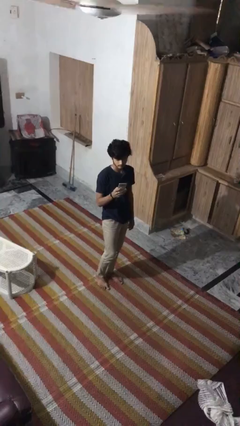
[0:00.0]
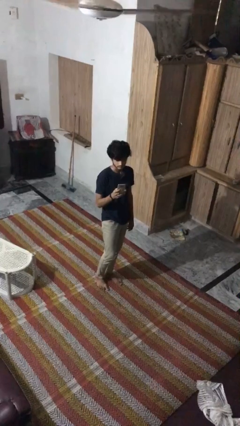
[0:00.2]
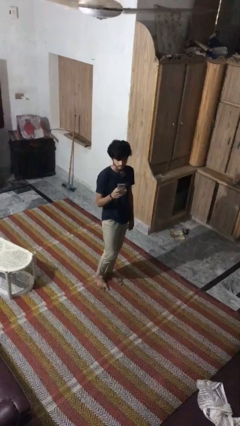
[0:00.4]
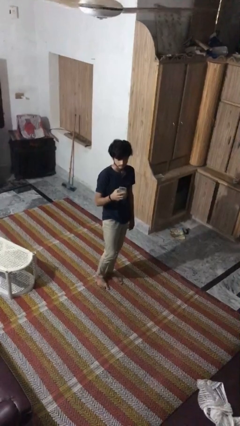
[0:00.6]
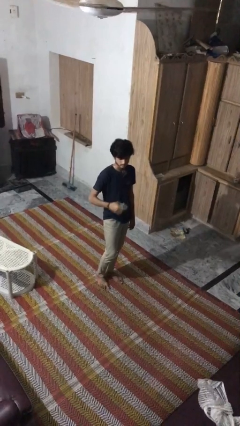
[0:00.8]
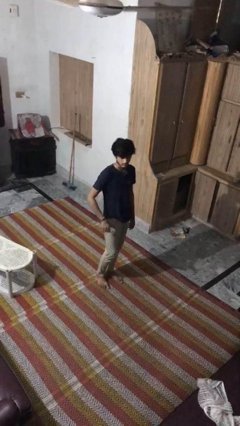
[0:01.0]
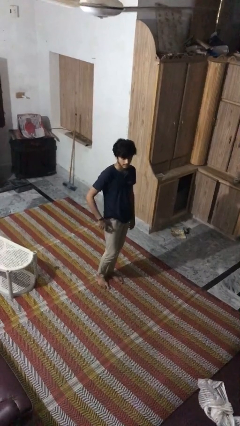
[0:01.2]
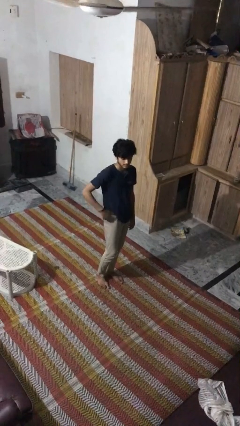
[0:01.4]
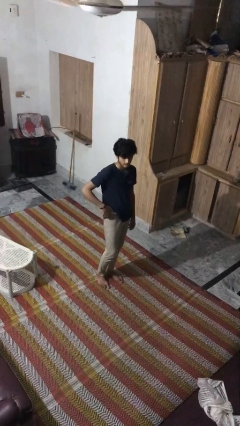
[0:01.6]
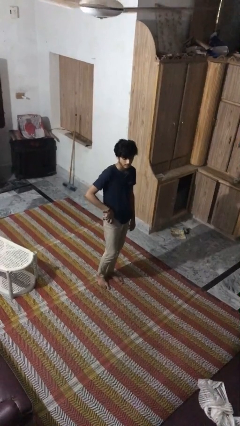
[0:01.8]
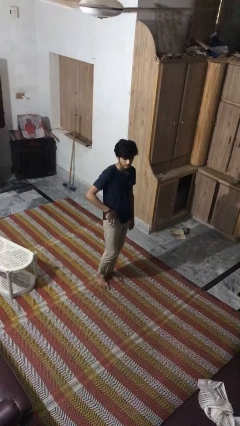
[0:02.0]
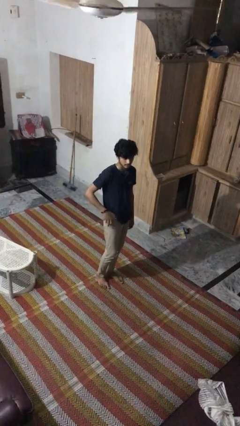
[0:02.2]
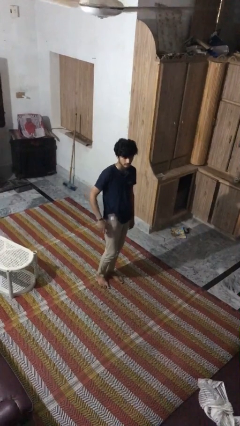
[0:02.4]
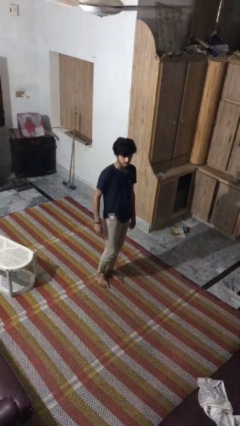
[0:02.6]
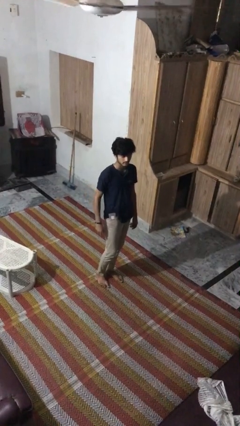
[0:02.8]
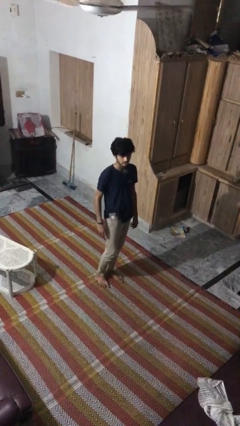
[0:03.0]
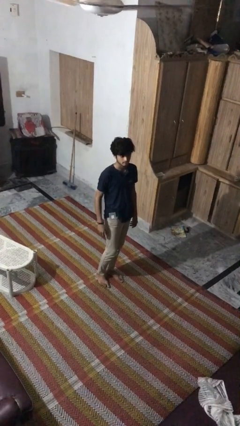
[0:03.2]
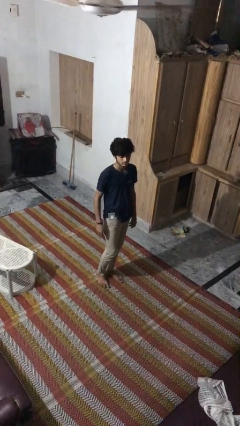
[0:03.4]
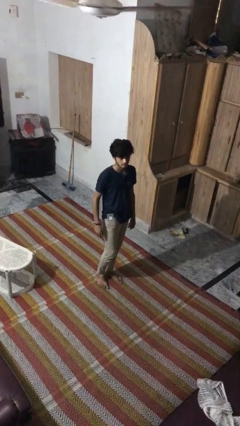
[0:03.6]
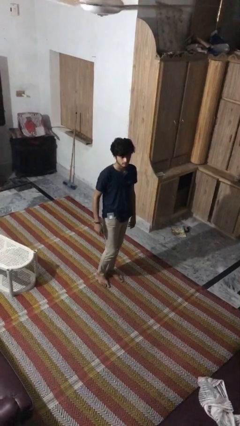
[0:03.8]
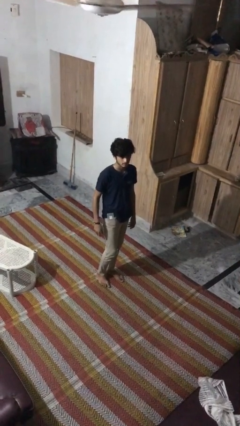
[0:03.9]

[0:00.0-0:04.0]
person puts phone into pocket

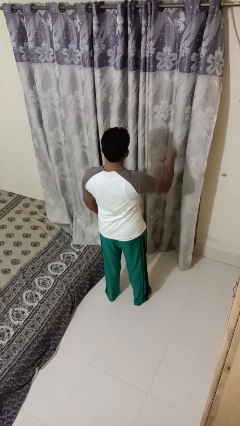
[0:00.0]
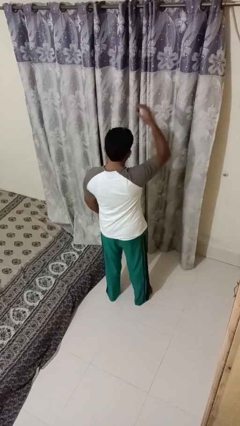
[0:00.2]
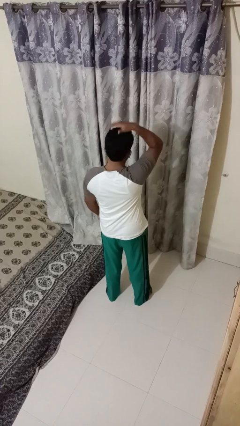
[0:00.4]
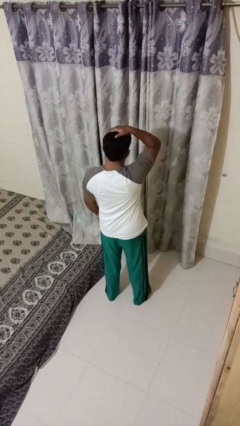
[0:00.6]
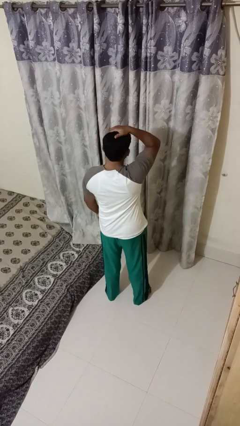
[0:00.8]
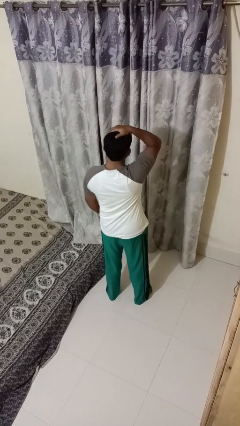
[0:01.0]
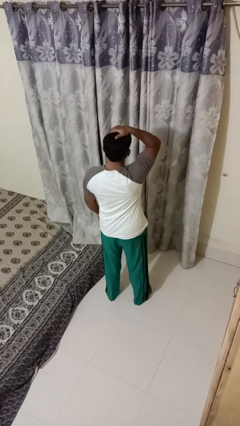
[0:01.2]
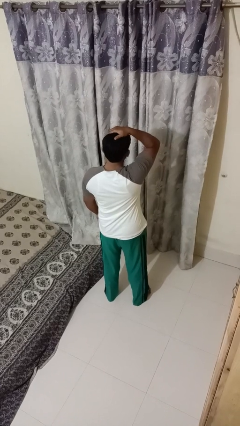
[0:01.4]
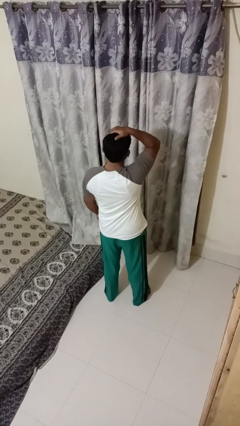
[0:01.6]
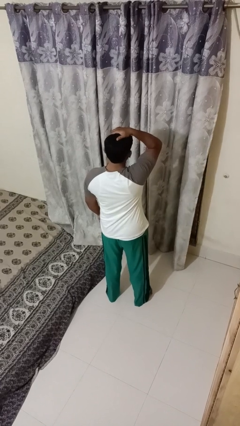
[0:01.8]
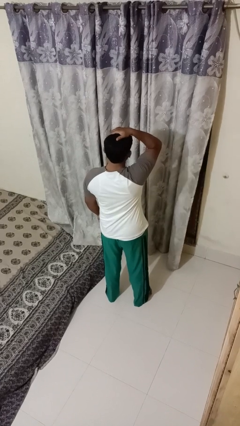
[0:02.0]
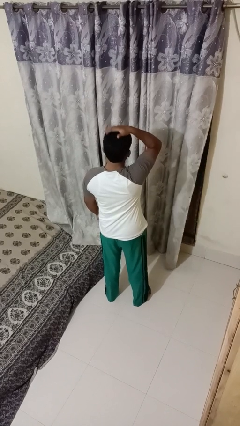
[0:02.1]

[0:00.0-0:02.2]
person pats head

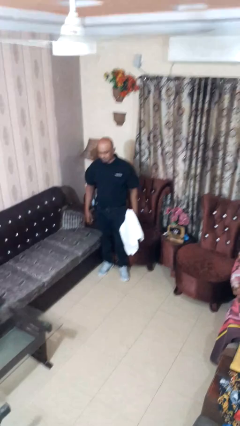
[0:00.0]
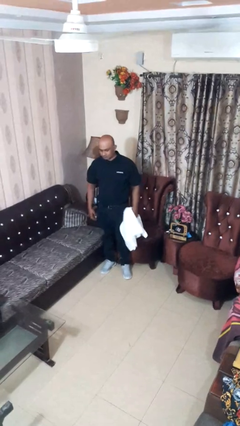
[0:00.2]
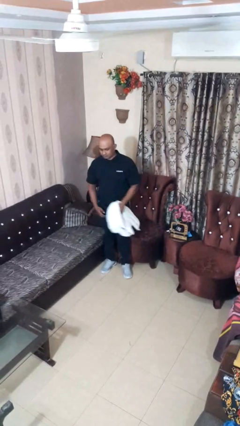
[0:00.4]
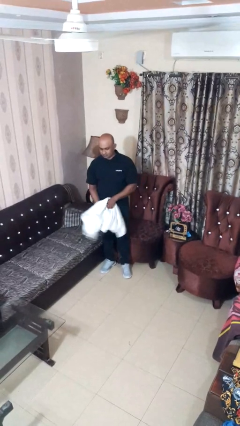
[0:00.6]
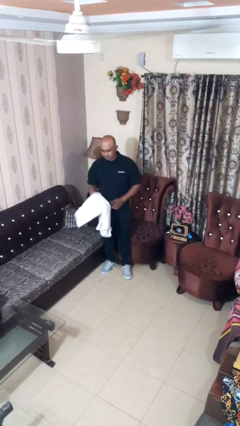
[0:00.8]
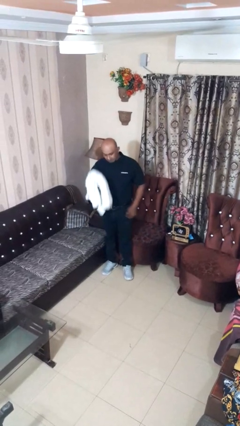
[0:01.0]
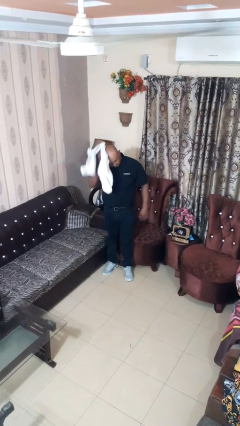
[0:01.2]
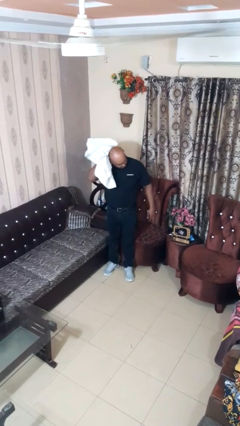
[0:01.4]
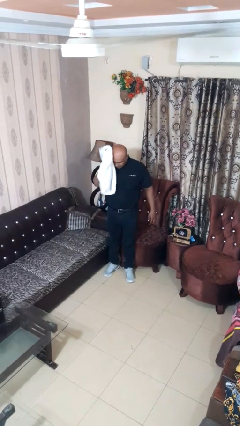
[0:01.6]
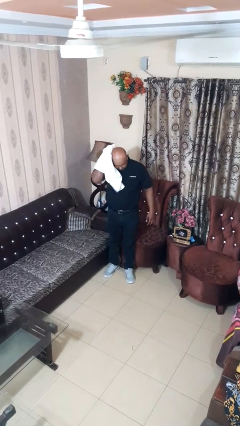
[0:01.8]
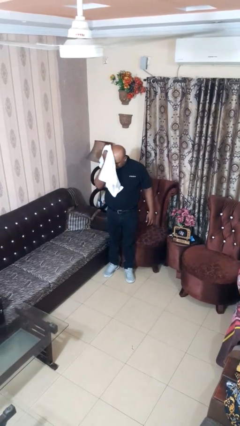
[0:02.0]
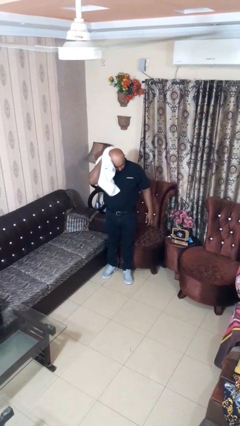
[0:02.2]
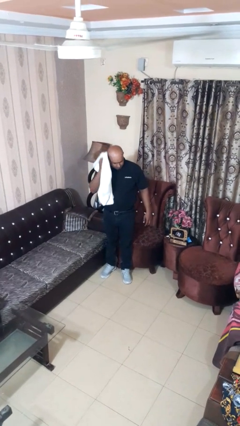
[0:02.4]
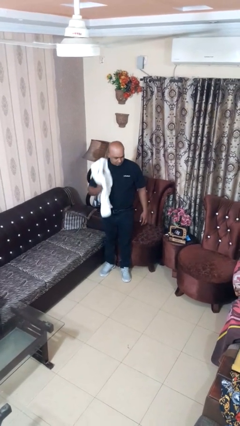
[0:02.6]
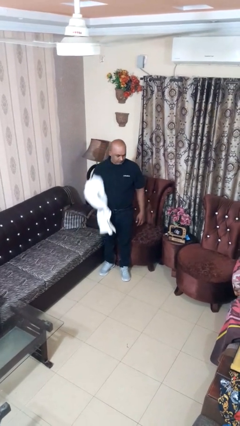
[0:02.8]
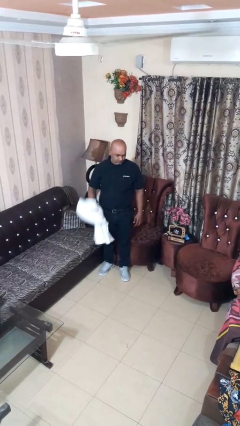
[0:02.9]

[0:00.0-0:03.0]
person dries hair with towel

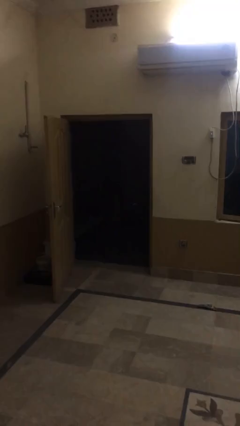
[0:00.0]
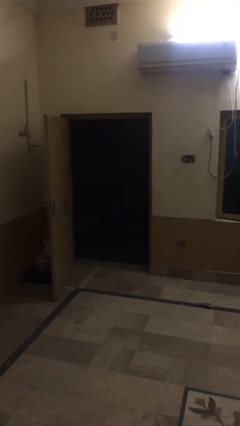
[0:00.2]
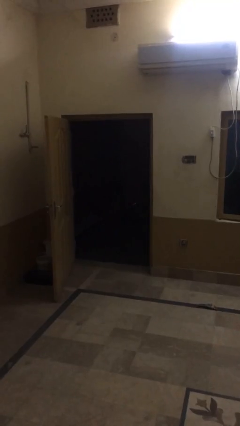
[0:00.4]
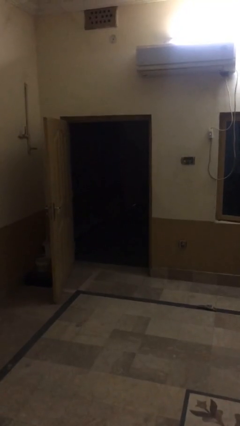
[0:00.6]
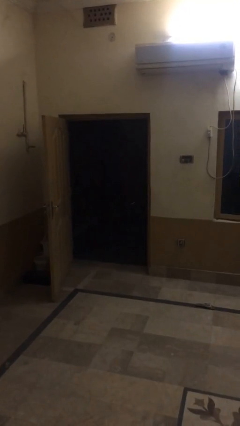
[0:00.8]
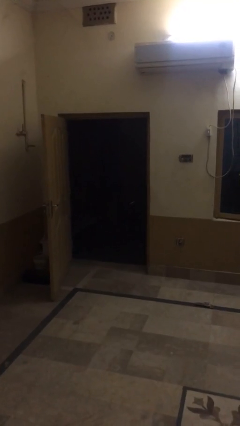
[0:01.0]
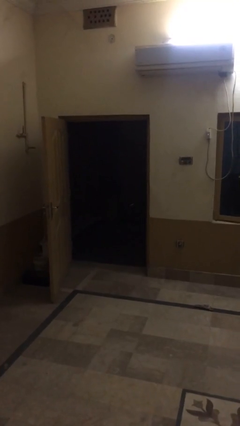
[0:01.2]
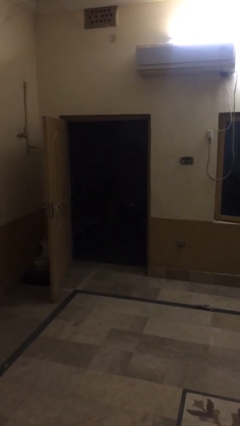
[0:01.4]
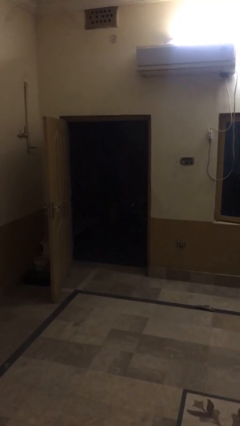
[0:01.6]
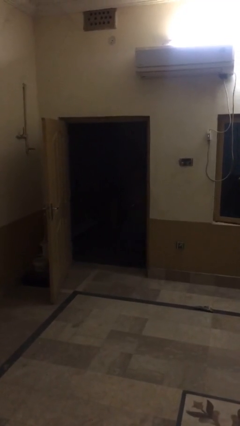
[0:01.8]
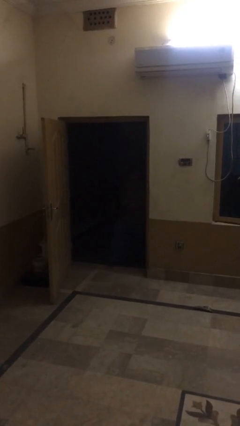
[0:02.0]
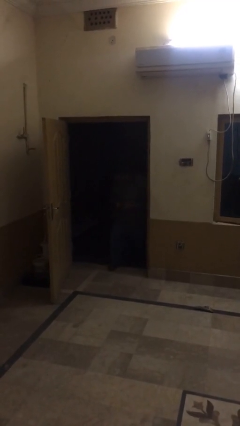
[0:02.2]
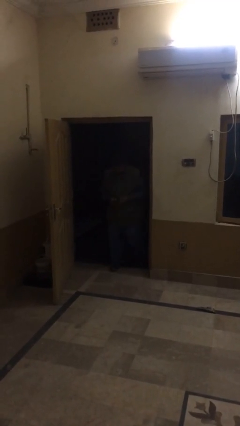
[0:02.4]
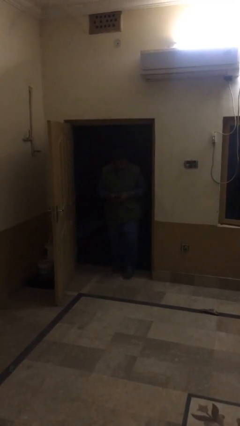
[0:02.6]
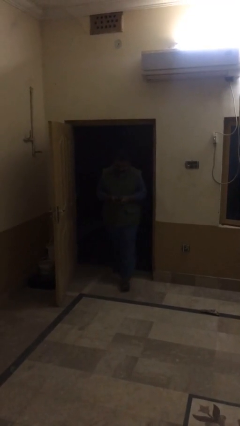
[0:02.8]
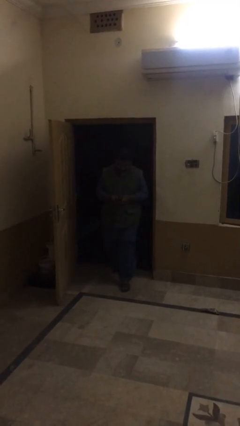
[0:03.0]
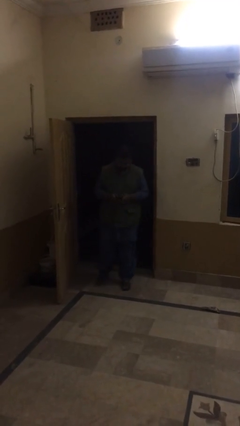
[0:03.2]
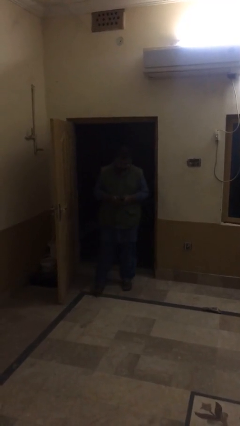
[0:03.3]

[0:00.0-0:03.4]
person enters scene through structure

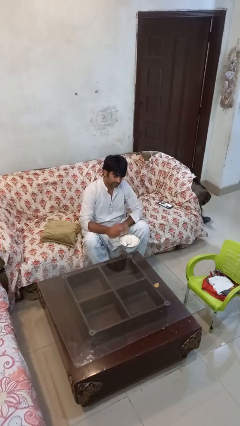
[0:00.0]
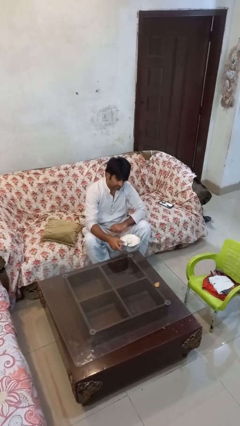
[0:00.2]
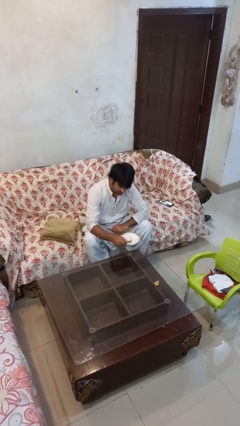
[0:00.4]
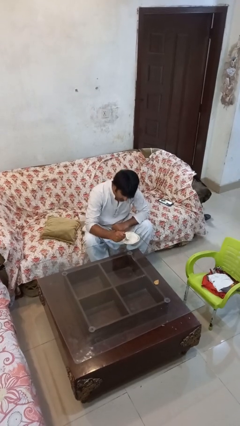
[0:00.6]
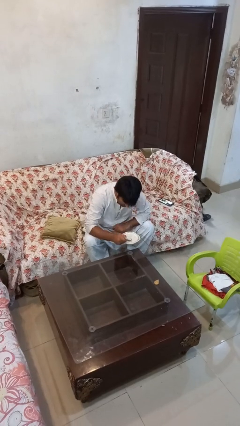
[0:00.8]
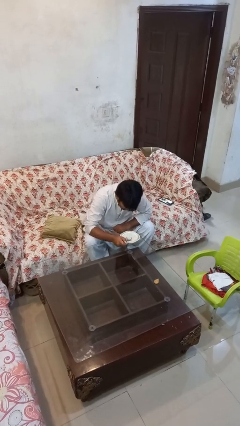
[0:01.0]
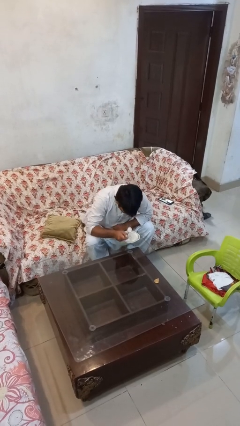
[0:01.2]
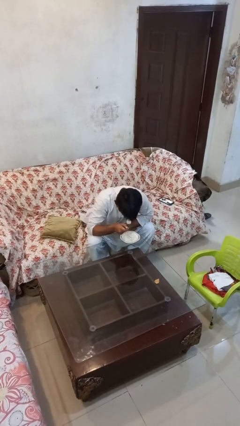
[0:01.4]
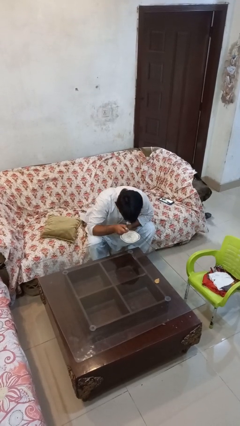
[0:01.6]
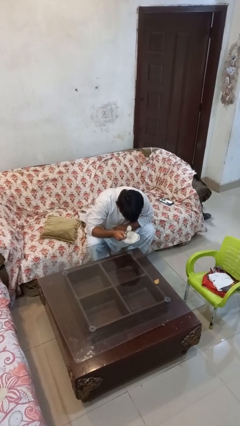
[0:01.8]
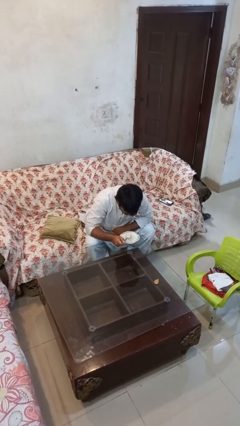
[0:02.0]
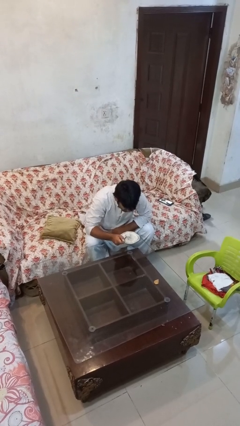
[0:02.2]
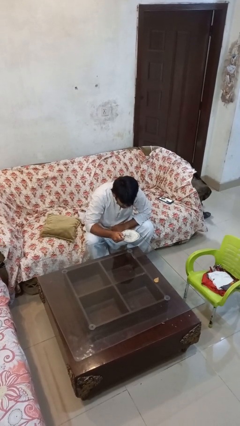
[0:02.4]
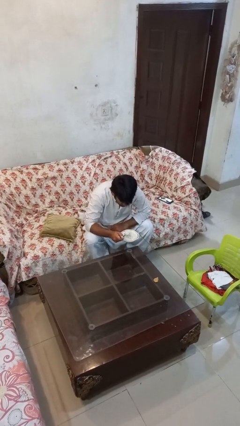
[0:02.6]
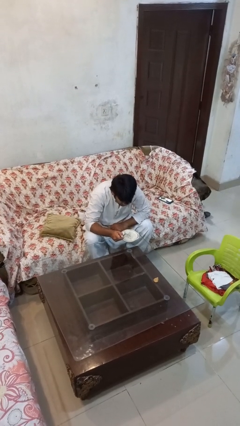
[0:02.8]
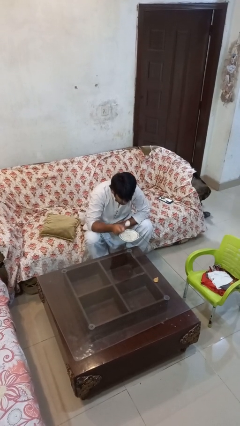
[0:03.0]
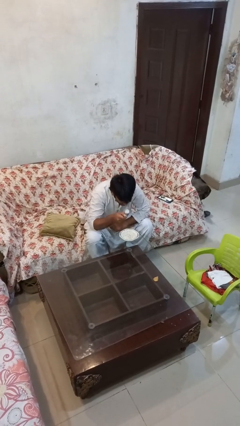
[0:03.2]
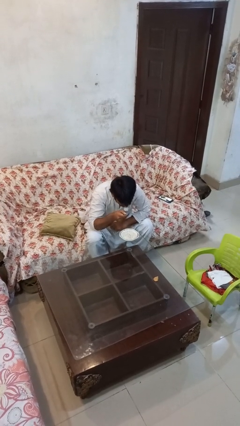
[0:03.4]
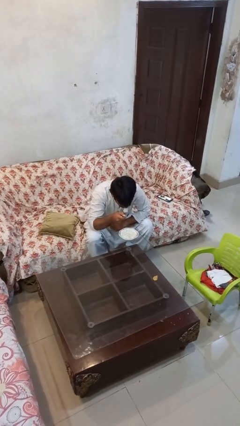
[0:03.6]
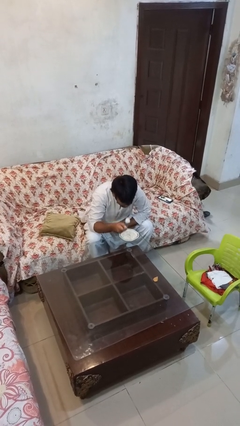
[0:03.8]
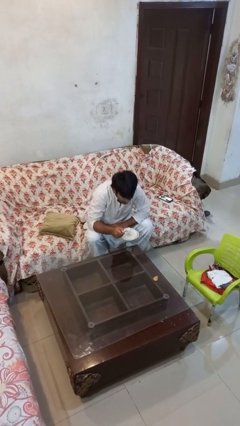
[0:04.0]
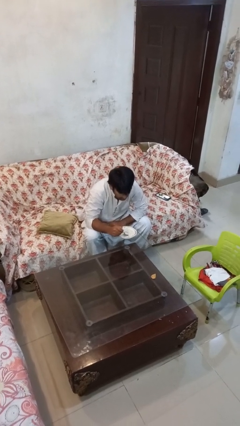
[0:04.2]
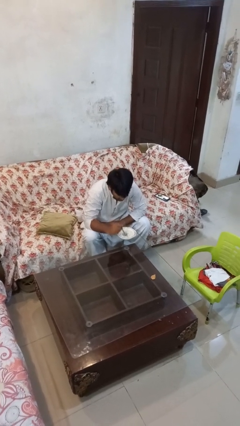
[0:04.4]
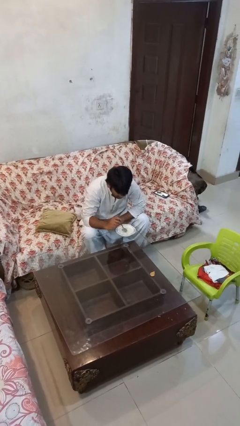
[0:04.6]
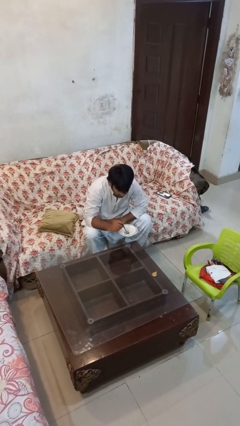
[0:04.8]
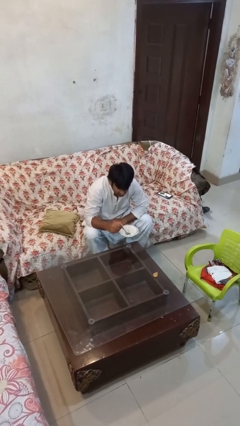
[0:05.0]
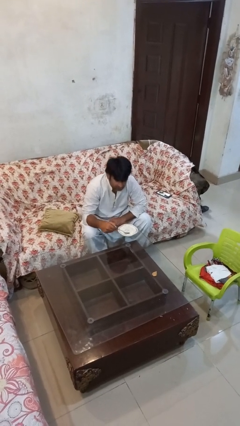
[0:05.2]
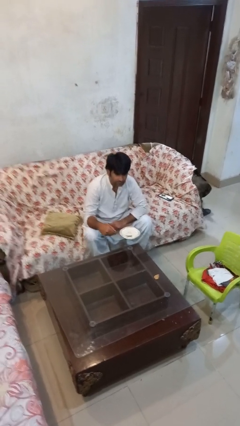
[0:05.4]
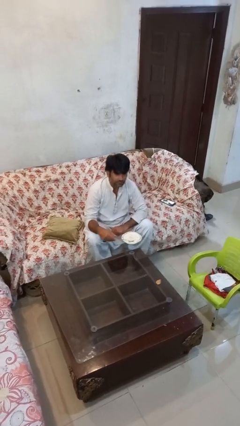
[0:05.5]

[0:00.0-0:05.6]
person eats with utensil
